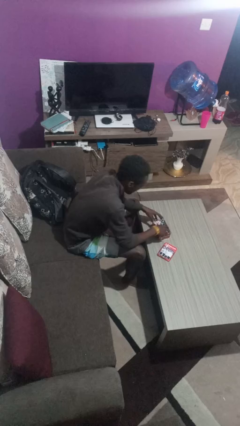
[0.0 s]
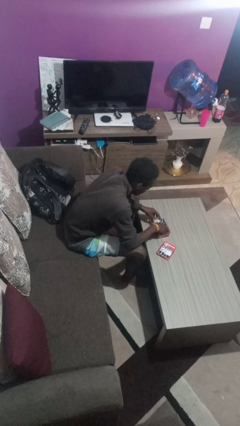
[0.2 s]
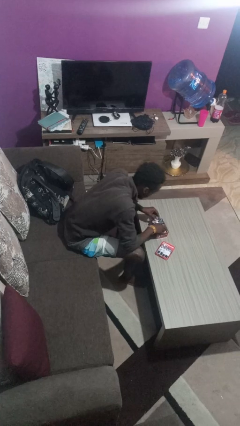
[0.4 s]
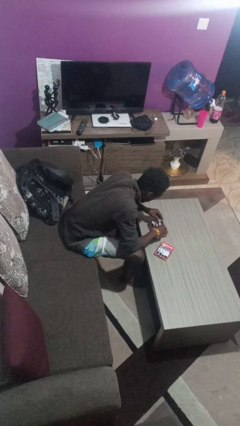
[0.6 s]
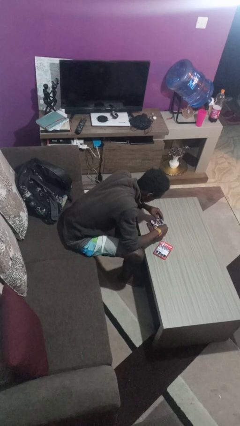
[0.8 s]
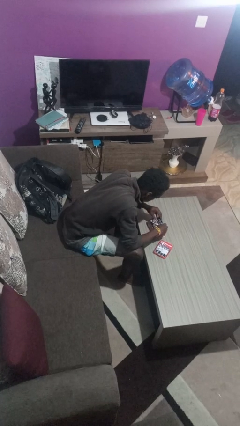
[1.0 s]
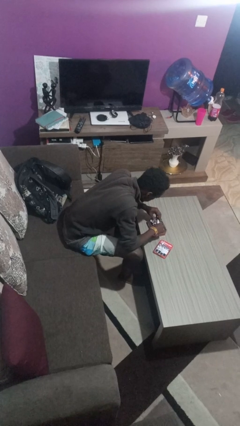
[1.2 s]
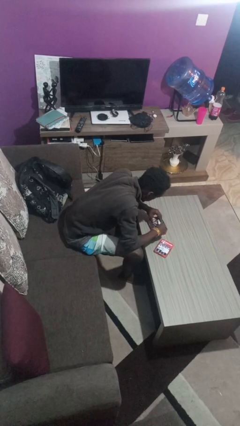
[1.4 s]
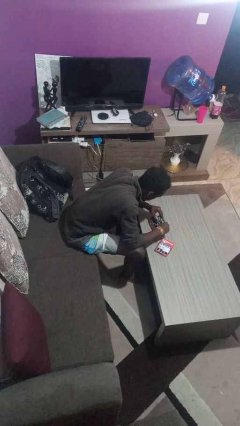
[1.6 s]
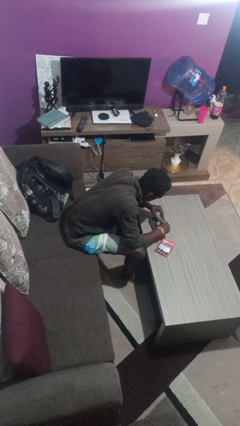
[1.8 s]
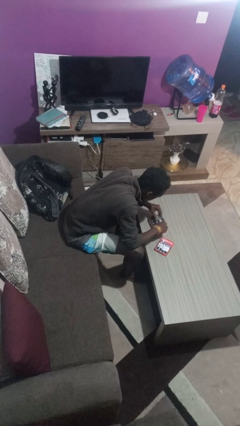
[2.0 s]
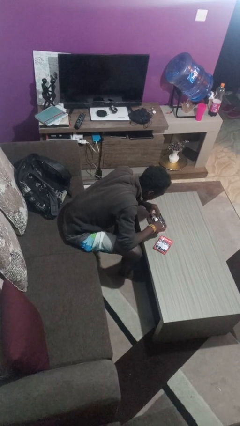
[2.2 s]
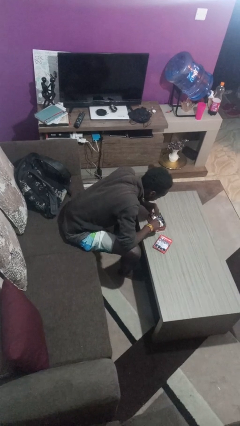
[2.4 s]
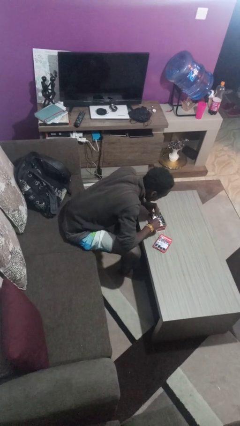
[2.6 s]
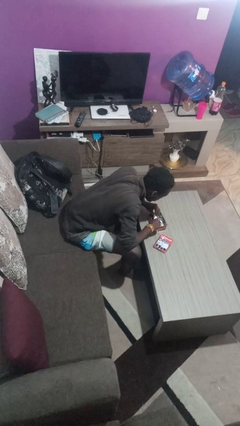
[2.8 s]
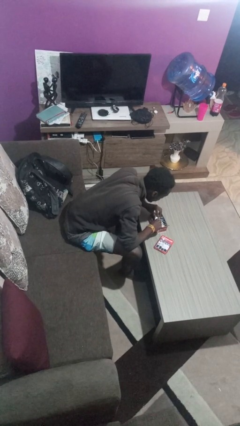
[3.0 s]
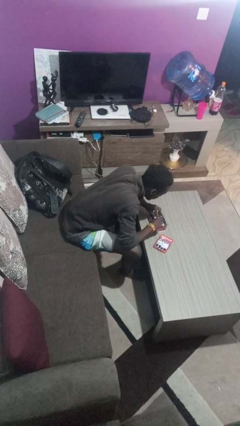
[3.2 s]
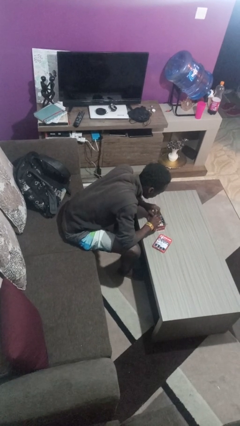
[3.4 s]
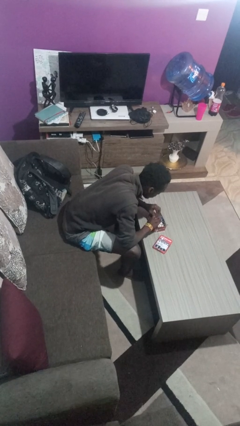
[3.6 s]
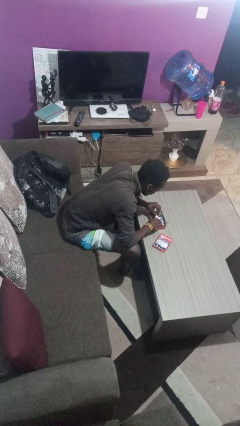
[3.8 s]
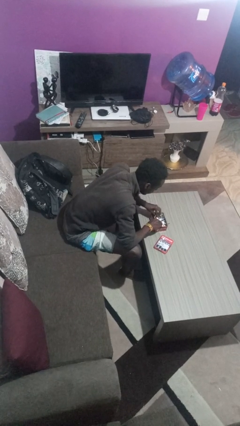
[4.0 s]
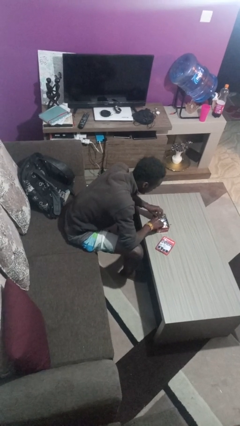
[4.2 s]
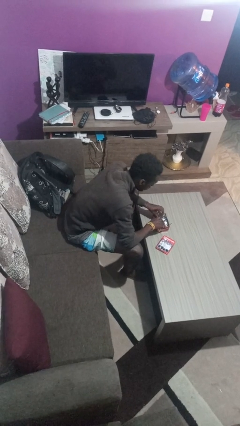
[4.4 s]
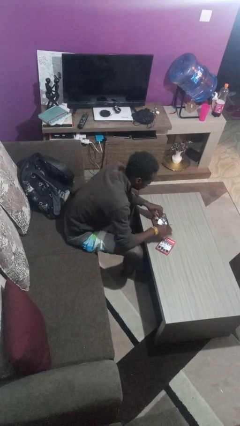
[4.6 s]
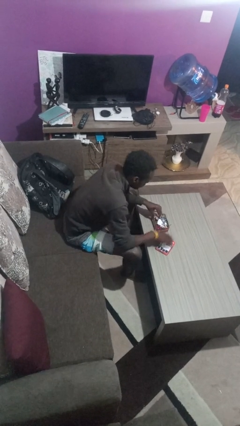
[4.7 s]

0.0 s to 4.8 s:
person searches jewelry box

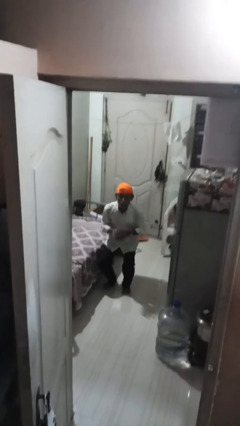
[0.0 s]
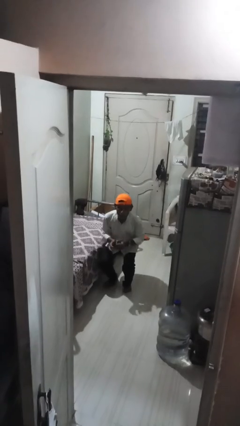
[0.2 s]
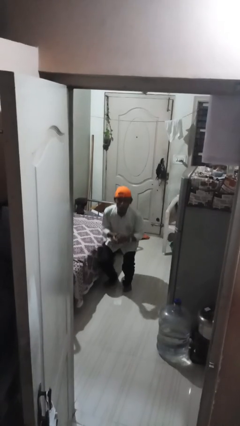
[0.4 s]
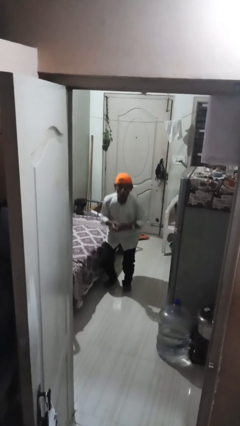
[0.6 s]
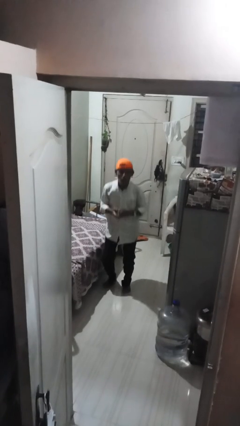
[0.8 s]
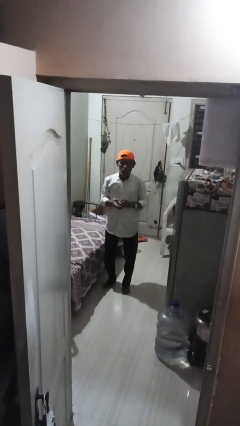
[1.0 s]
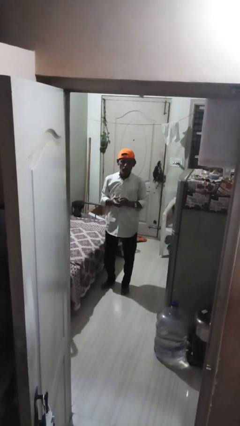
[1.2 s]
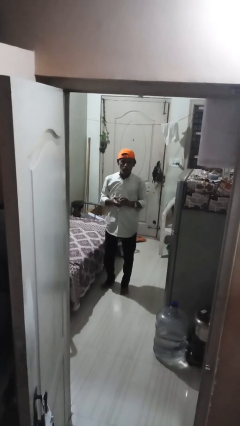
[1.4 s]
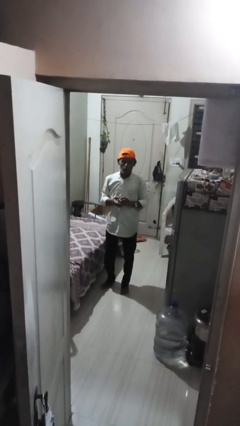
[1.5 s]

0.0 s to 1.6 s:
person catches dropped object

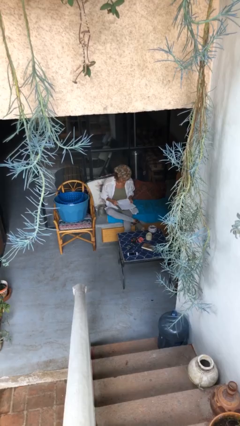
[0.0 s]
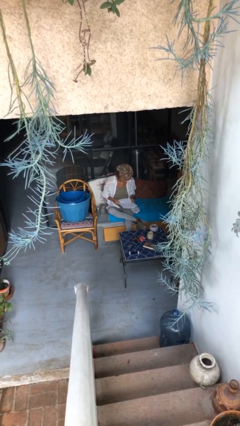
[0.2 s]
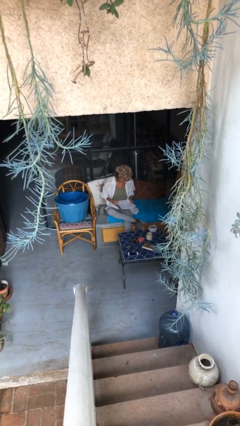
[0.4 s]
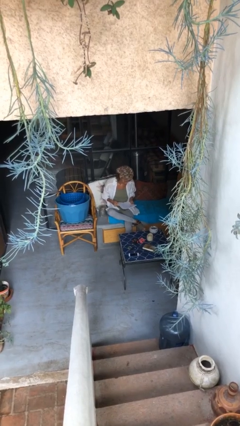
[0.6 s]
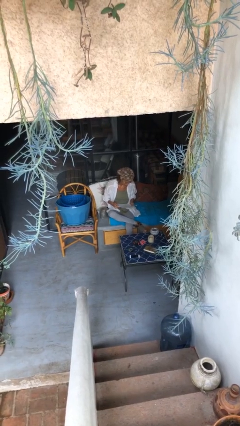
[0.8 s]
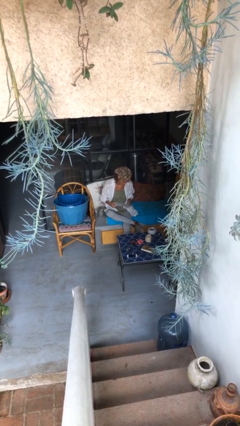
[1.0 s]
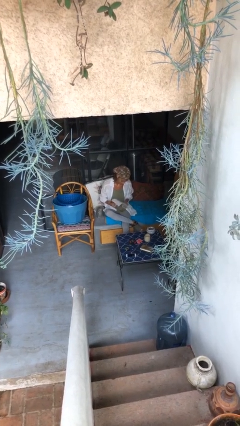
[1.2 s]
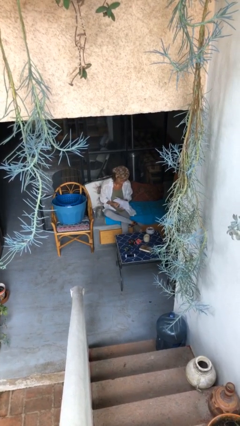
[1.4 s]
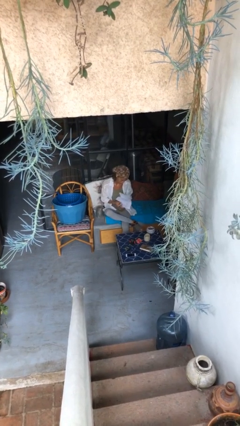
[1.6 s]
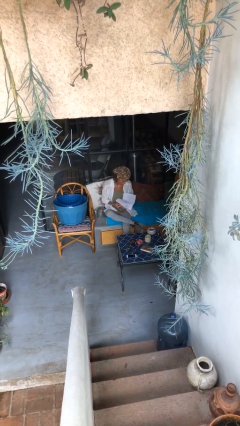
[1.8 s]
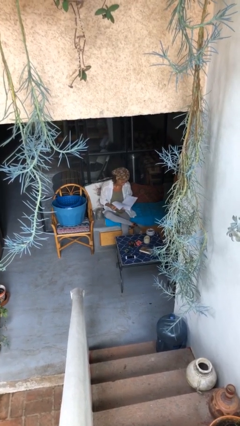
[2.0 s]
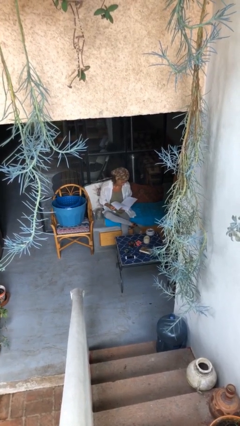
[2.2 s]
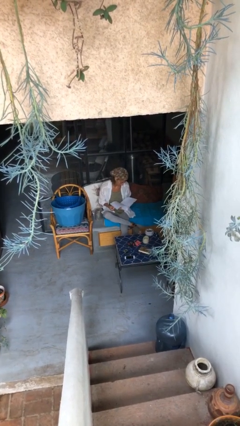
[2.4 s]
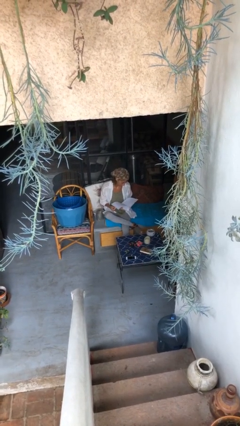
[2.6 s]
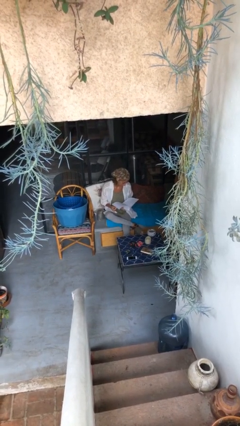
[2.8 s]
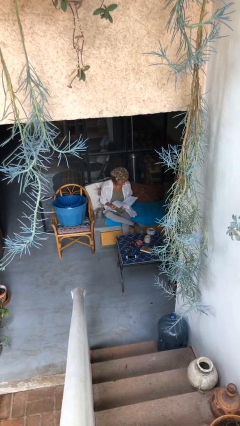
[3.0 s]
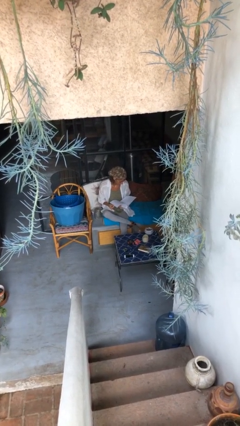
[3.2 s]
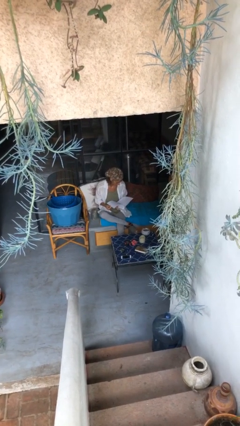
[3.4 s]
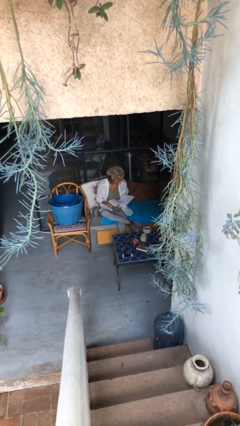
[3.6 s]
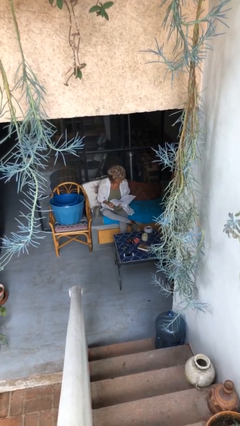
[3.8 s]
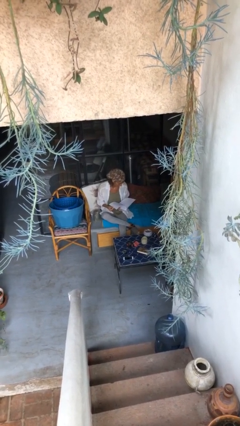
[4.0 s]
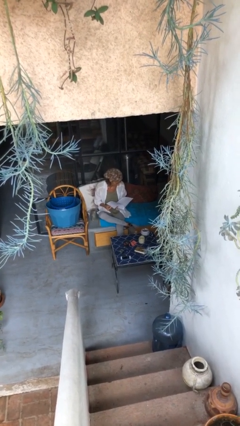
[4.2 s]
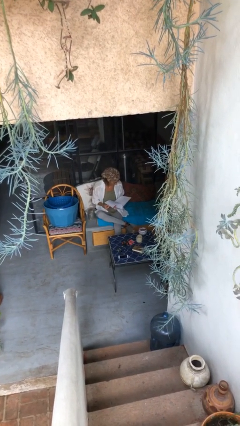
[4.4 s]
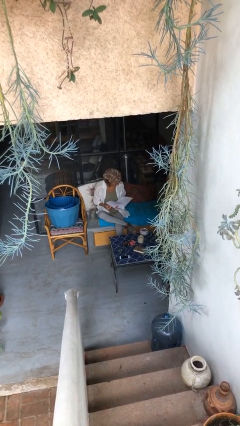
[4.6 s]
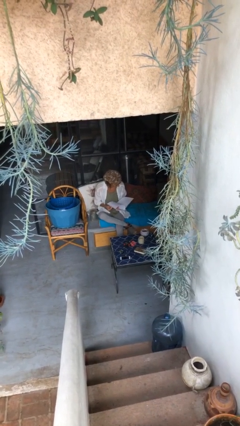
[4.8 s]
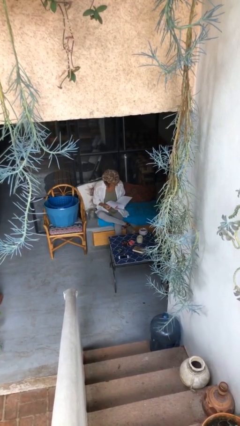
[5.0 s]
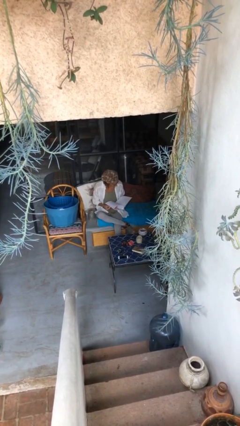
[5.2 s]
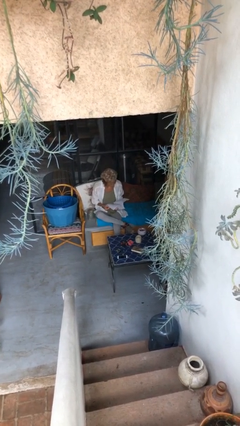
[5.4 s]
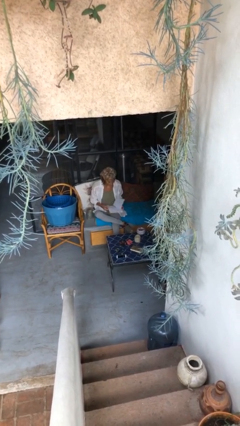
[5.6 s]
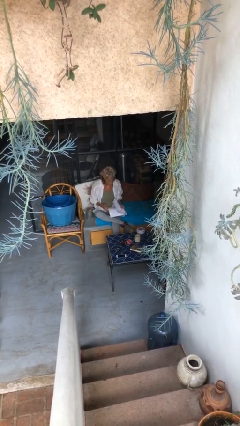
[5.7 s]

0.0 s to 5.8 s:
person reads document

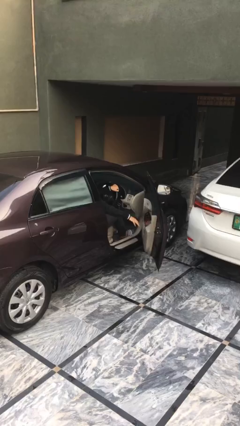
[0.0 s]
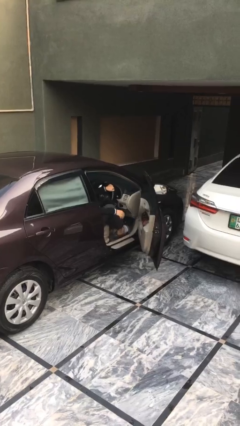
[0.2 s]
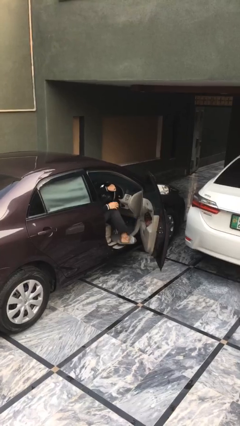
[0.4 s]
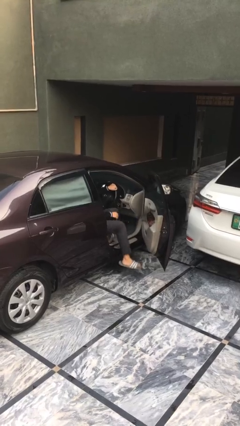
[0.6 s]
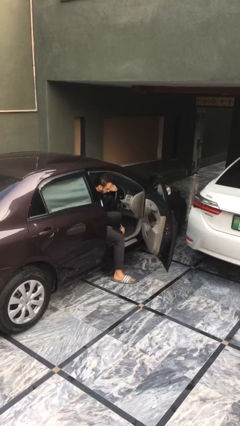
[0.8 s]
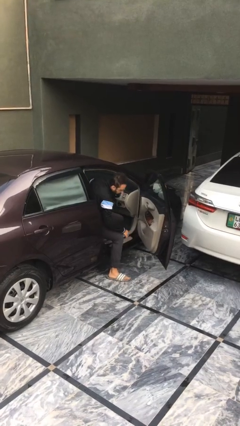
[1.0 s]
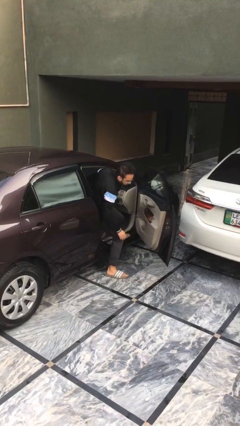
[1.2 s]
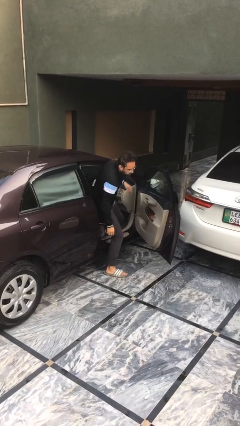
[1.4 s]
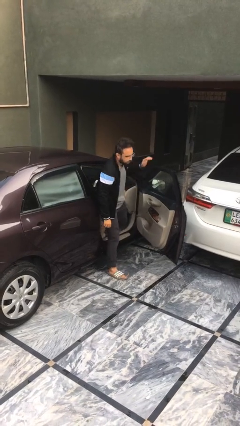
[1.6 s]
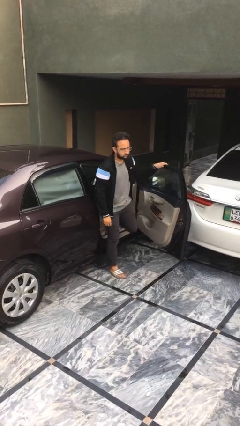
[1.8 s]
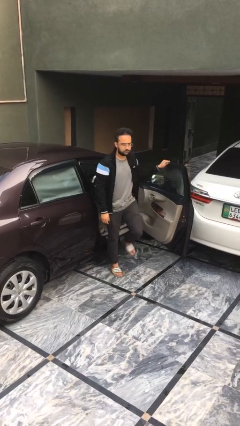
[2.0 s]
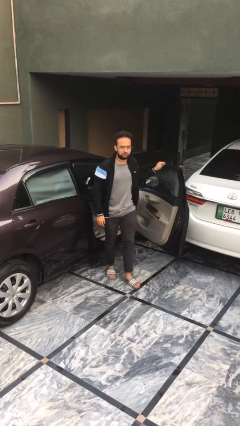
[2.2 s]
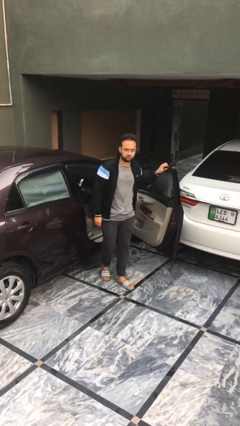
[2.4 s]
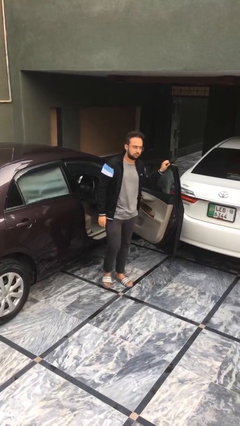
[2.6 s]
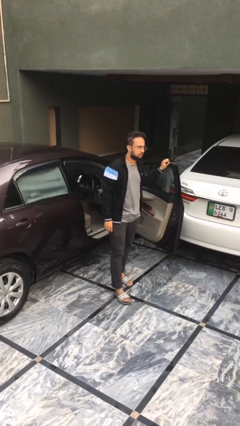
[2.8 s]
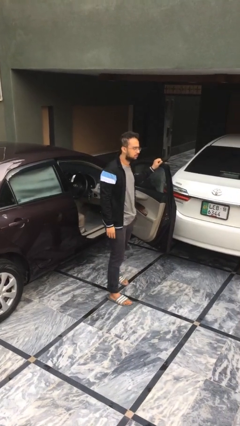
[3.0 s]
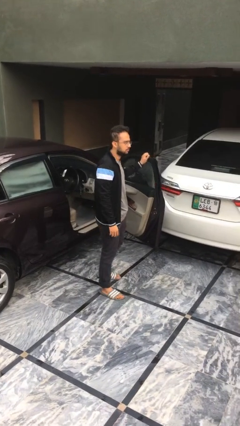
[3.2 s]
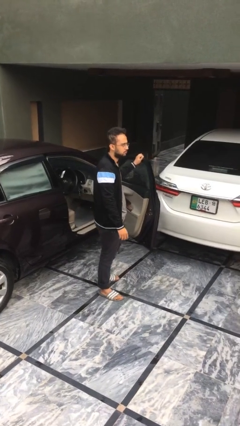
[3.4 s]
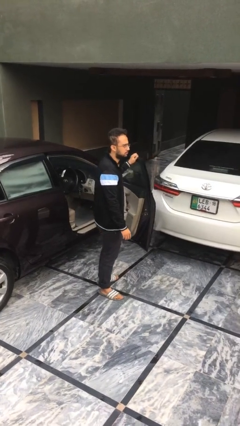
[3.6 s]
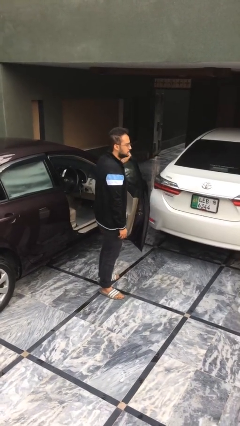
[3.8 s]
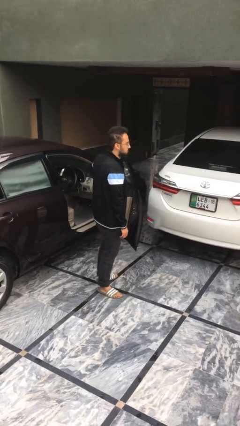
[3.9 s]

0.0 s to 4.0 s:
person exits car

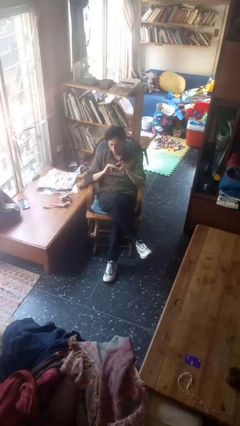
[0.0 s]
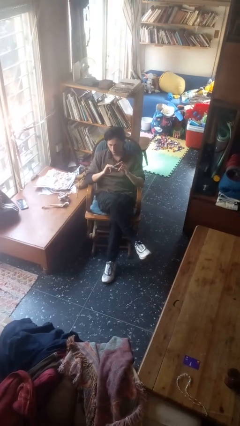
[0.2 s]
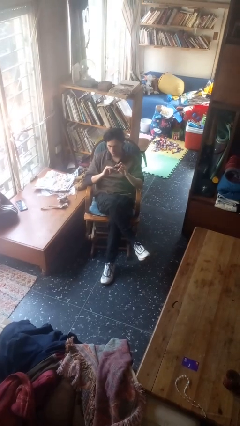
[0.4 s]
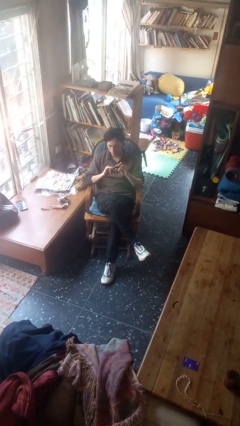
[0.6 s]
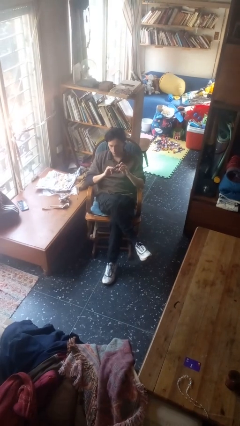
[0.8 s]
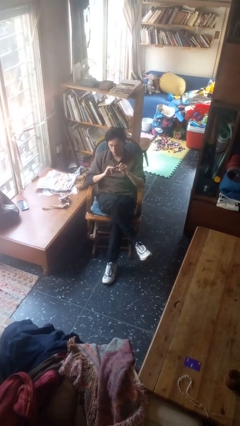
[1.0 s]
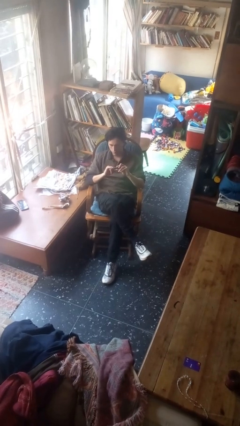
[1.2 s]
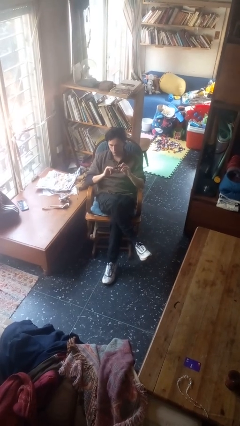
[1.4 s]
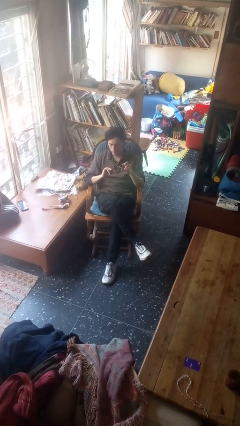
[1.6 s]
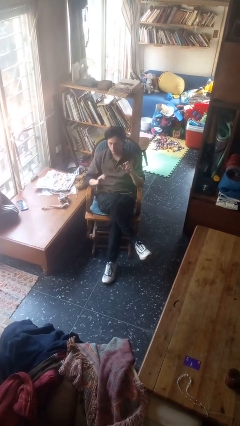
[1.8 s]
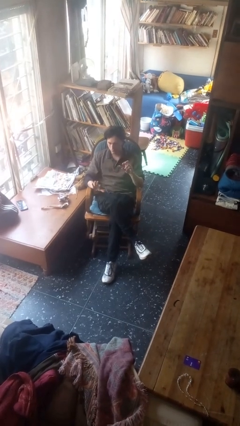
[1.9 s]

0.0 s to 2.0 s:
person clips fingernails
